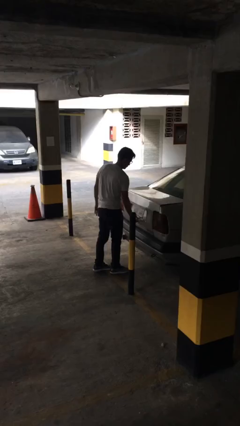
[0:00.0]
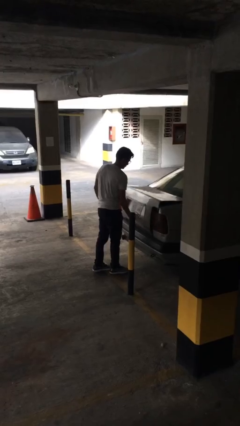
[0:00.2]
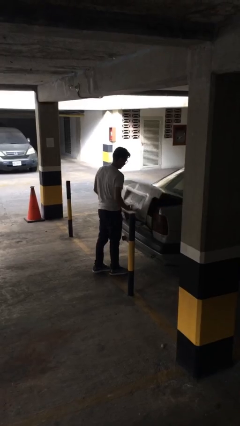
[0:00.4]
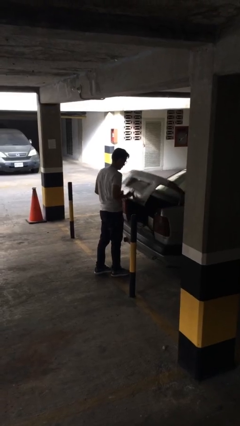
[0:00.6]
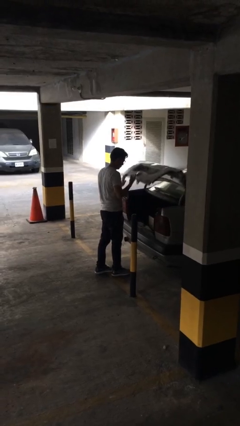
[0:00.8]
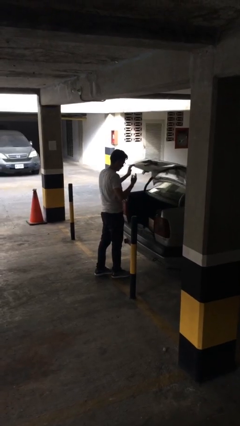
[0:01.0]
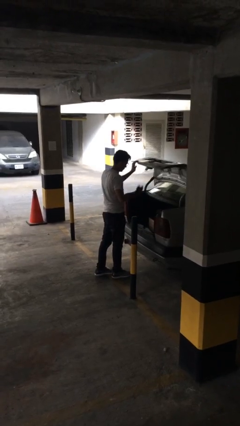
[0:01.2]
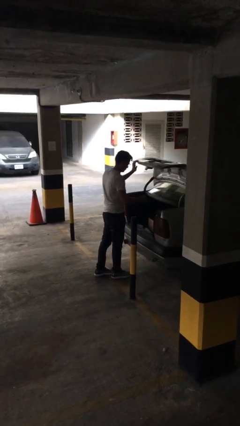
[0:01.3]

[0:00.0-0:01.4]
person opens car trunk

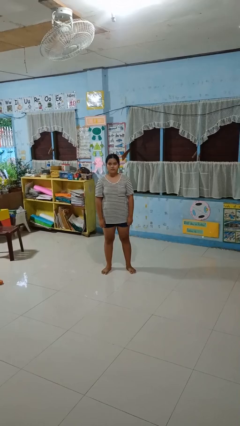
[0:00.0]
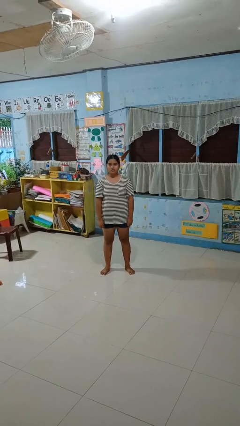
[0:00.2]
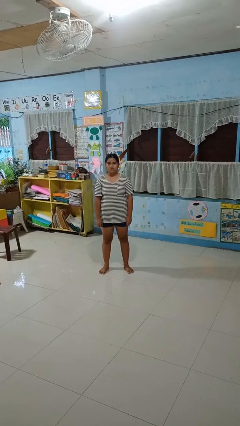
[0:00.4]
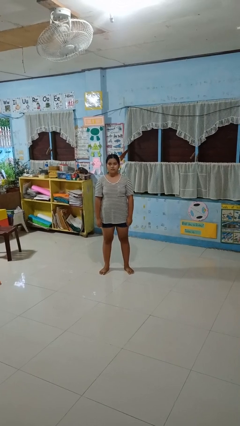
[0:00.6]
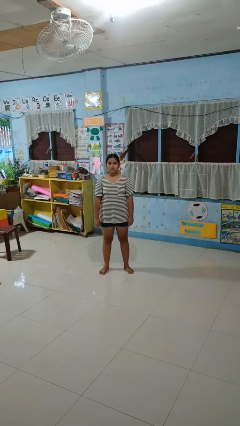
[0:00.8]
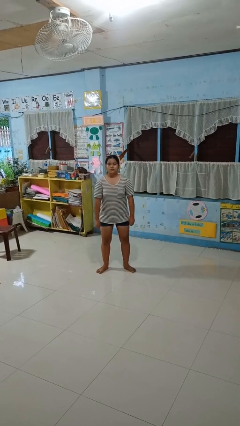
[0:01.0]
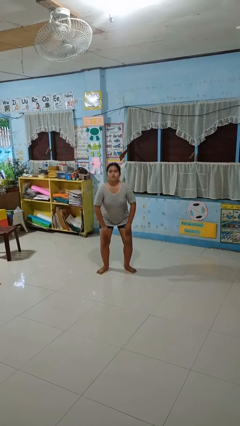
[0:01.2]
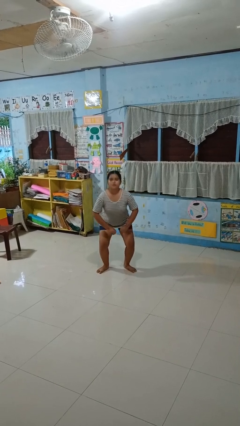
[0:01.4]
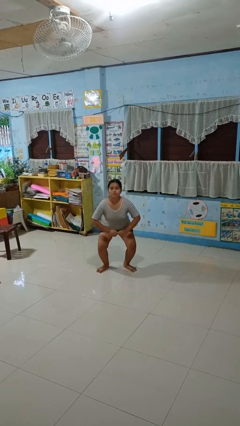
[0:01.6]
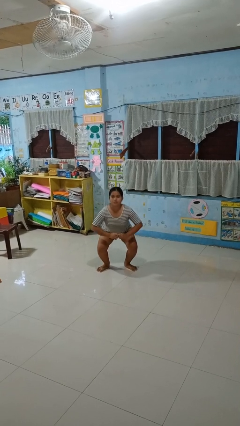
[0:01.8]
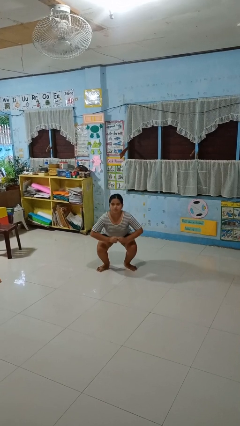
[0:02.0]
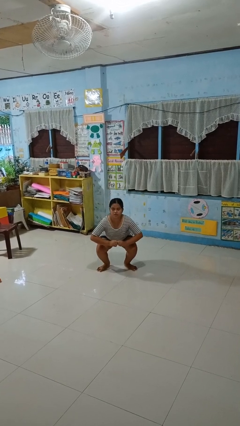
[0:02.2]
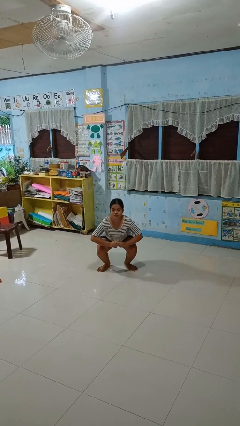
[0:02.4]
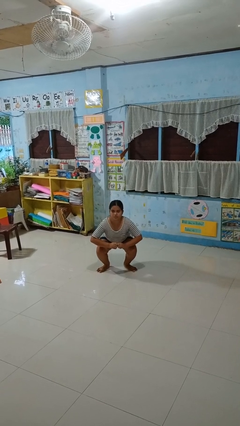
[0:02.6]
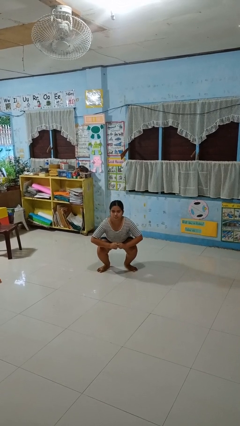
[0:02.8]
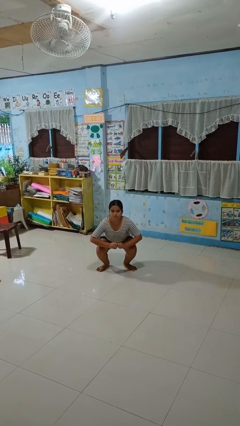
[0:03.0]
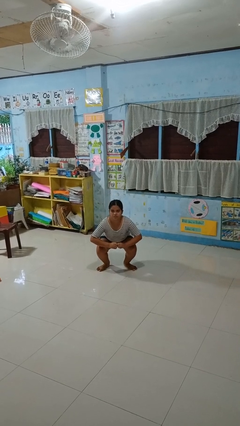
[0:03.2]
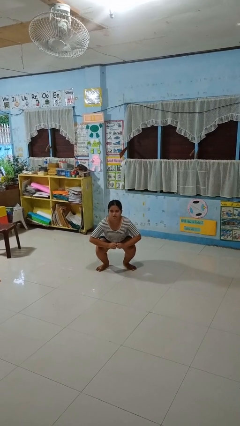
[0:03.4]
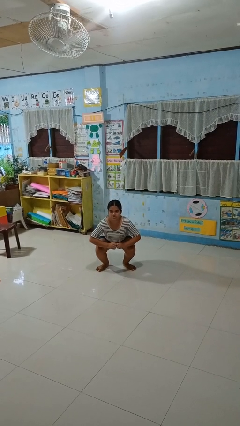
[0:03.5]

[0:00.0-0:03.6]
person squats

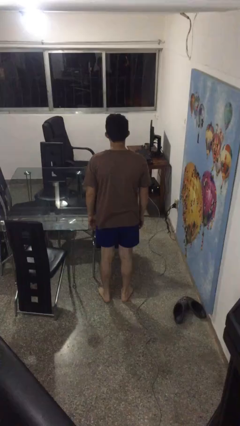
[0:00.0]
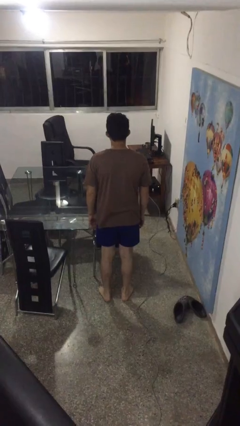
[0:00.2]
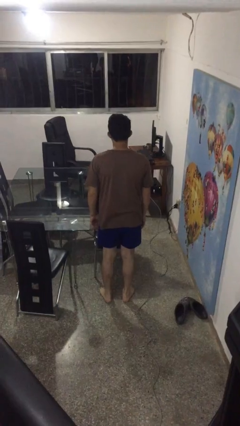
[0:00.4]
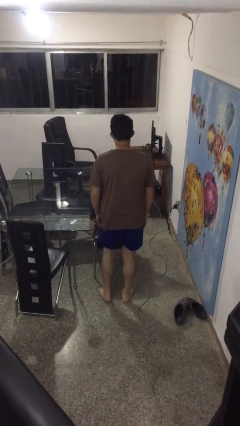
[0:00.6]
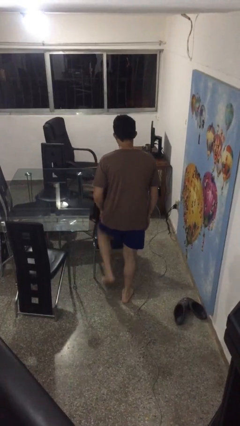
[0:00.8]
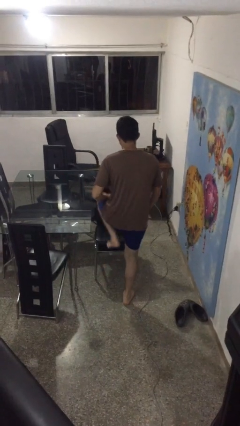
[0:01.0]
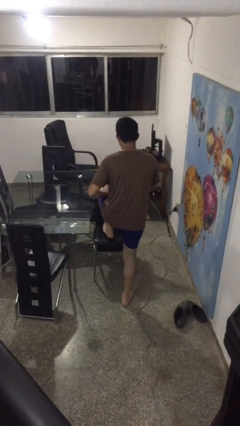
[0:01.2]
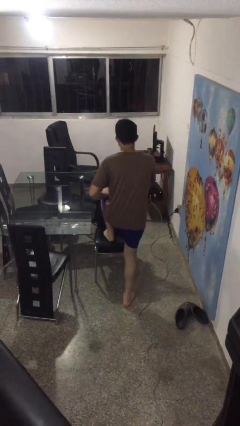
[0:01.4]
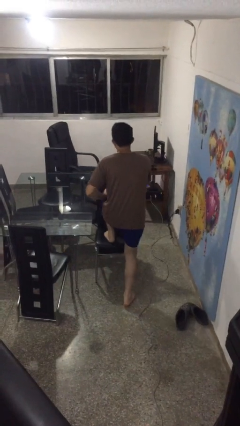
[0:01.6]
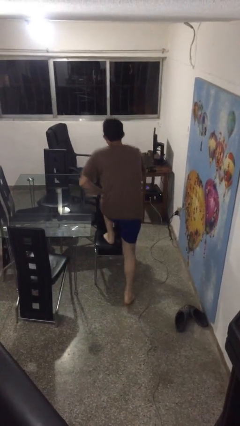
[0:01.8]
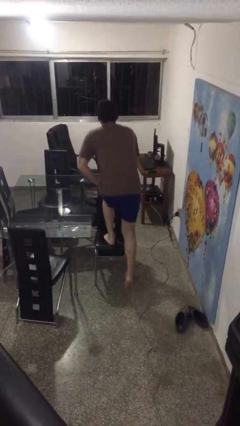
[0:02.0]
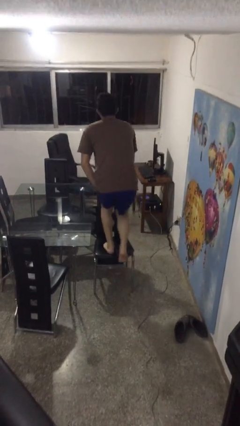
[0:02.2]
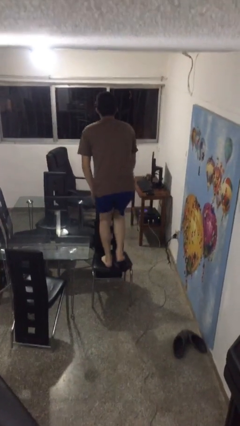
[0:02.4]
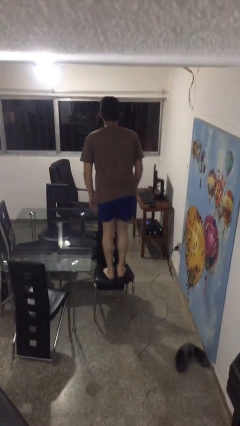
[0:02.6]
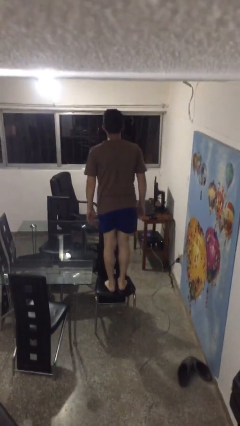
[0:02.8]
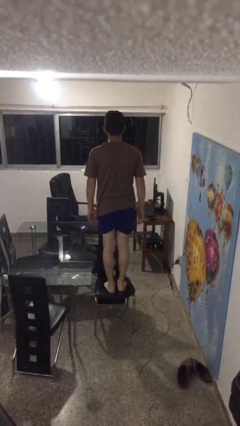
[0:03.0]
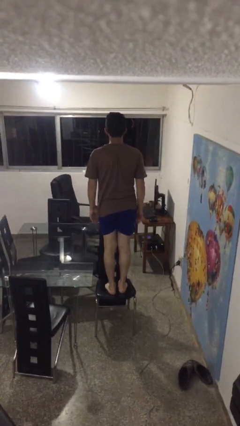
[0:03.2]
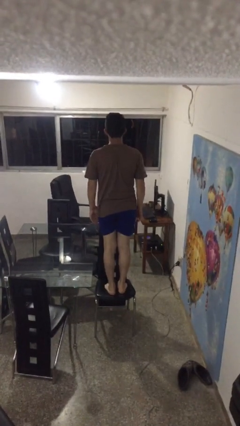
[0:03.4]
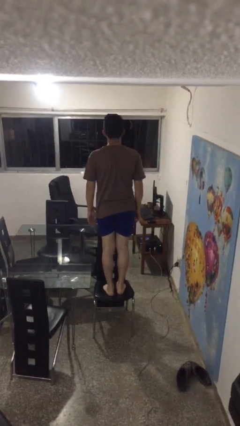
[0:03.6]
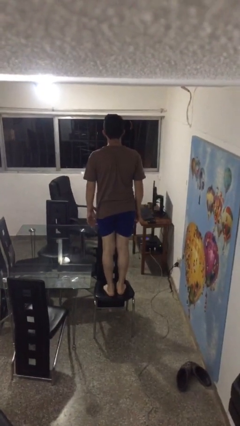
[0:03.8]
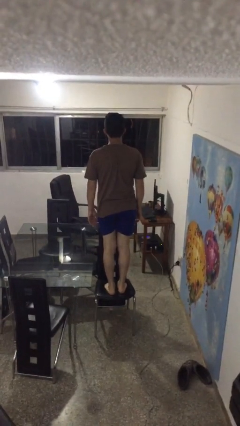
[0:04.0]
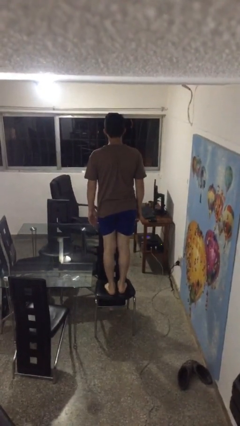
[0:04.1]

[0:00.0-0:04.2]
person climbs on chair

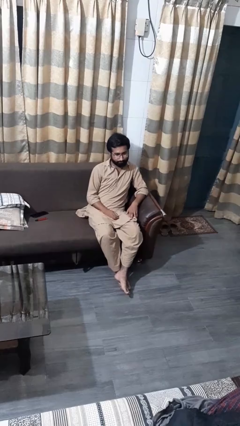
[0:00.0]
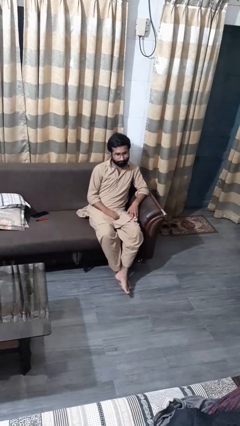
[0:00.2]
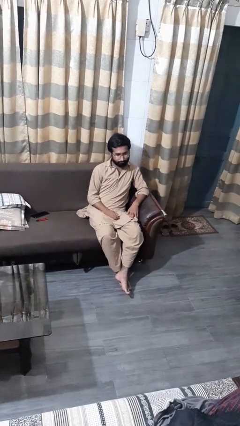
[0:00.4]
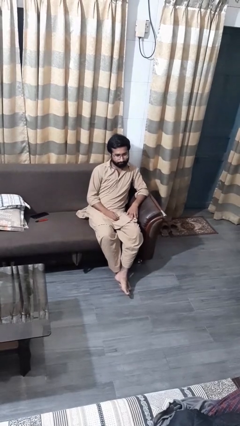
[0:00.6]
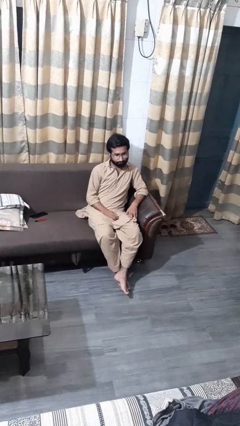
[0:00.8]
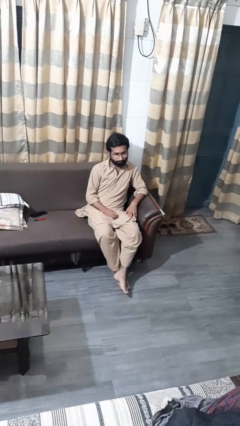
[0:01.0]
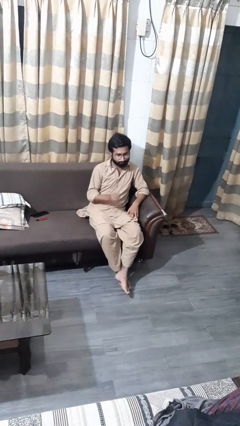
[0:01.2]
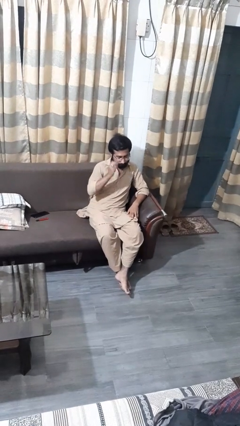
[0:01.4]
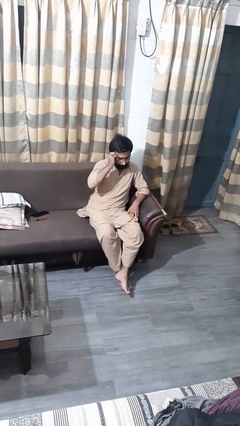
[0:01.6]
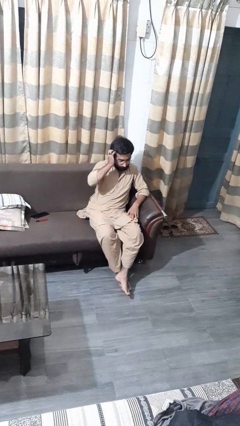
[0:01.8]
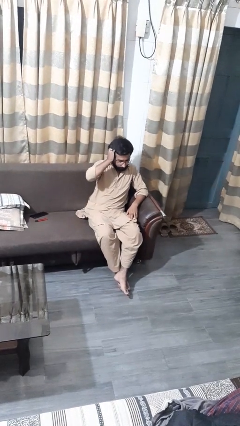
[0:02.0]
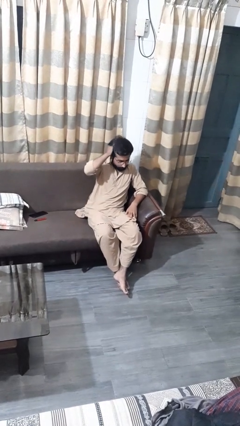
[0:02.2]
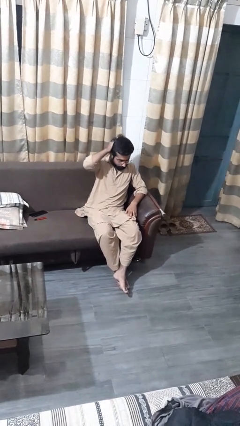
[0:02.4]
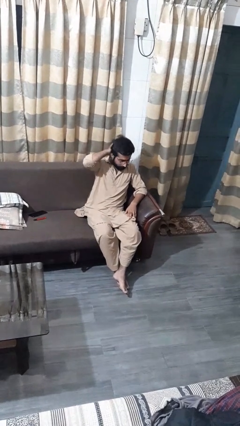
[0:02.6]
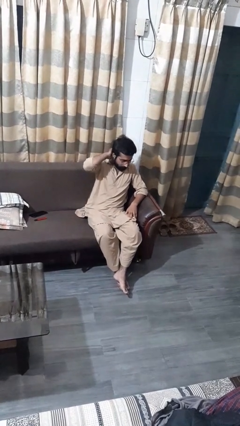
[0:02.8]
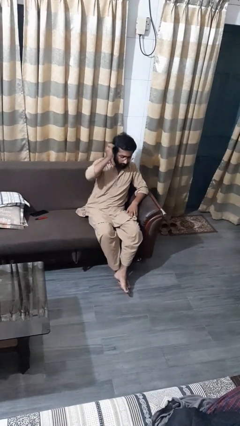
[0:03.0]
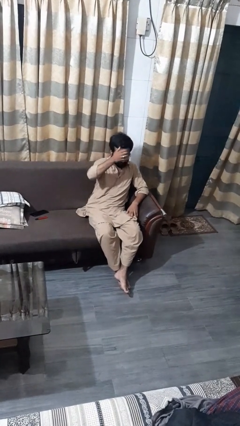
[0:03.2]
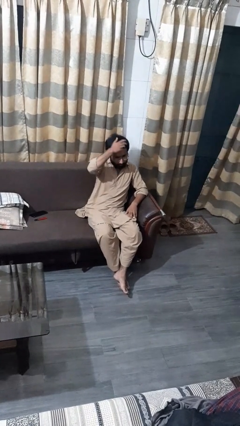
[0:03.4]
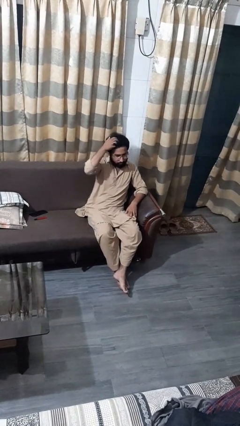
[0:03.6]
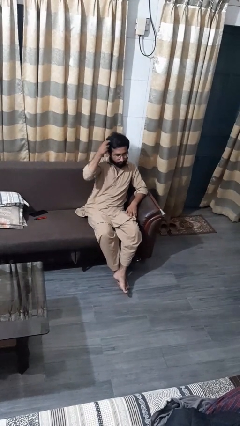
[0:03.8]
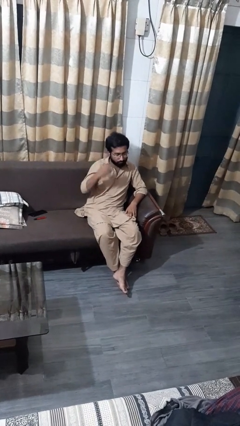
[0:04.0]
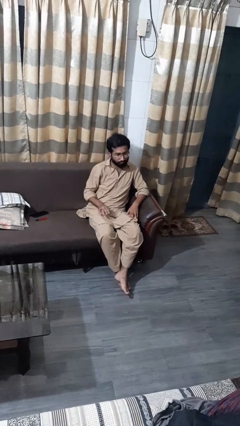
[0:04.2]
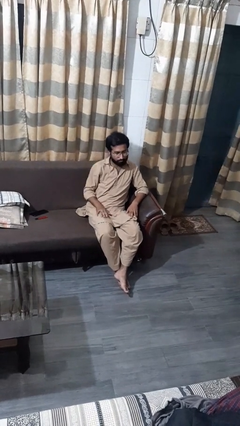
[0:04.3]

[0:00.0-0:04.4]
person strokes hair

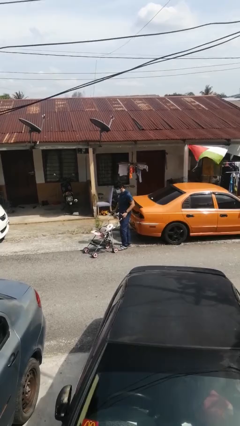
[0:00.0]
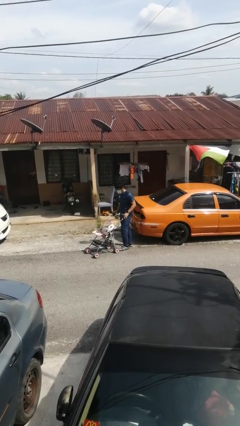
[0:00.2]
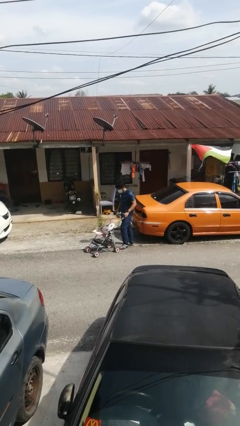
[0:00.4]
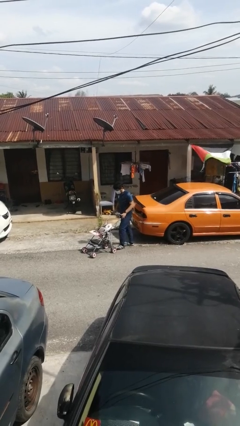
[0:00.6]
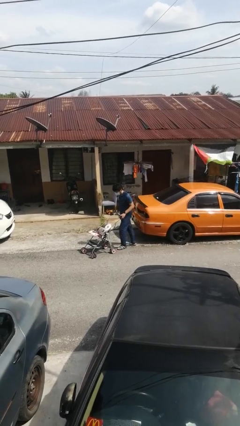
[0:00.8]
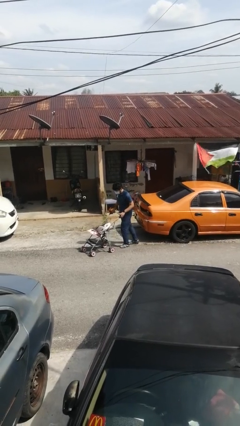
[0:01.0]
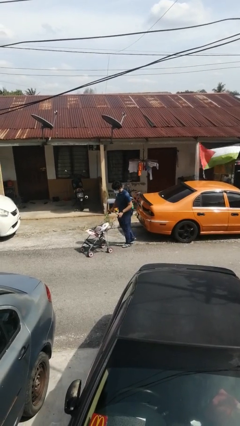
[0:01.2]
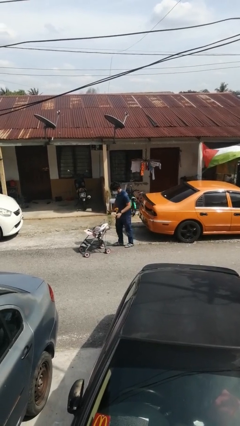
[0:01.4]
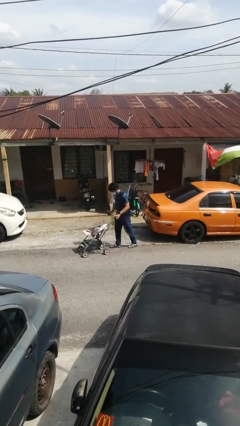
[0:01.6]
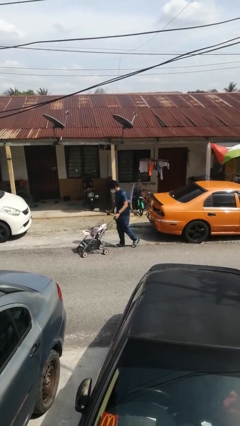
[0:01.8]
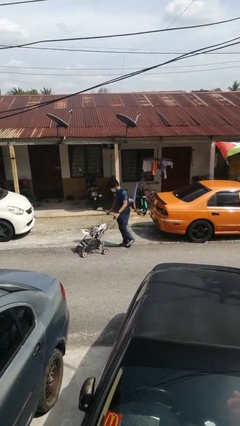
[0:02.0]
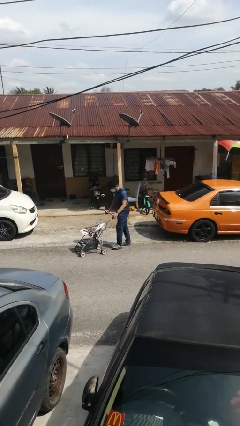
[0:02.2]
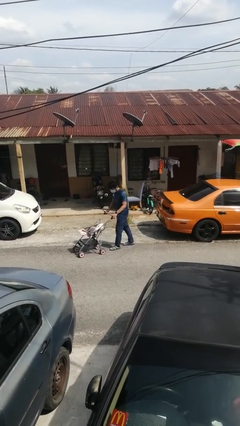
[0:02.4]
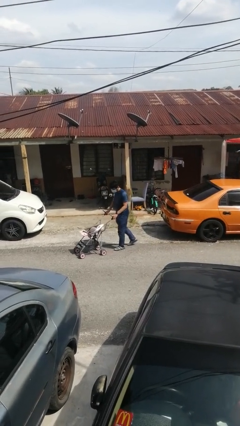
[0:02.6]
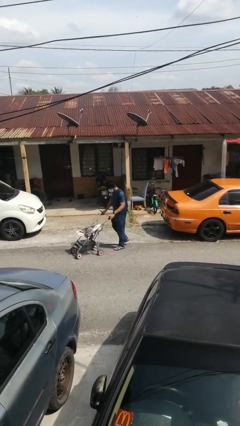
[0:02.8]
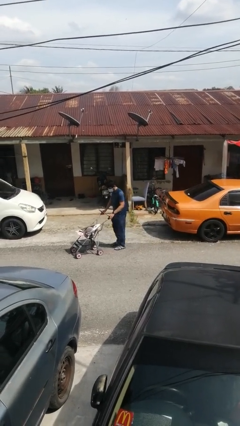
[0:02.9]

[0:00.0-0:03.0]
person pushes wheeled cart

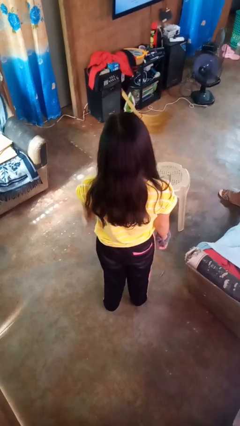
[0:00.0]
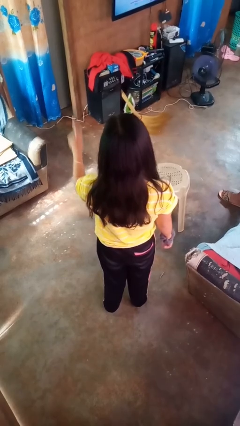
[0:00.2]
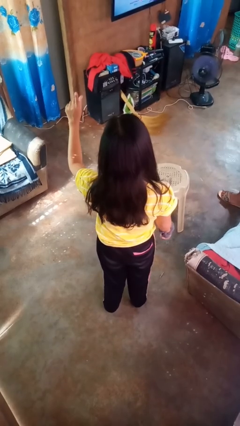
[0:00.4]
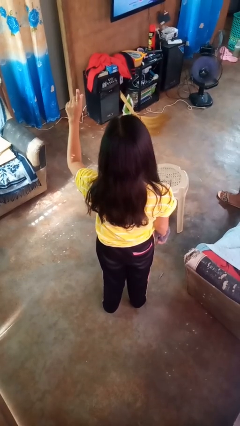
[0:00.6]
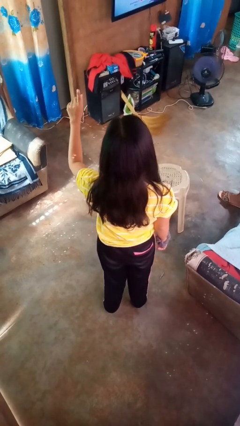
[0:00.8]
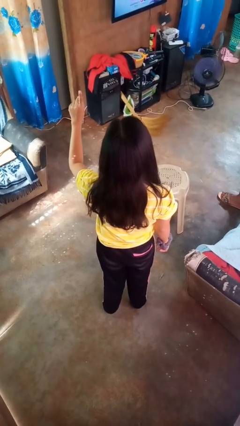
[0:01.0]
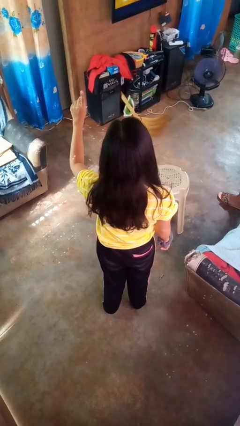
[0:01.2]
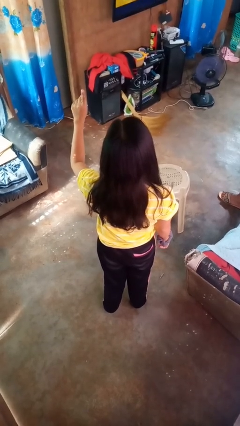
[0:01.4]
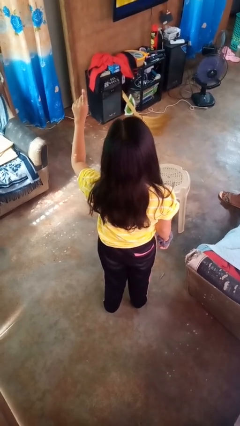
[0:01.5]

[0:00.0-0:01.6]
person gestures number one
